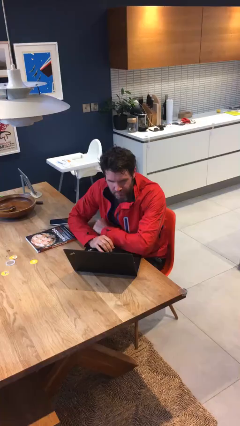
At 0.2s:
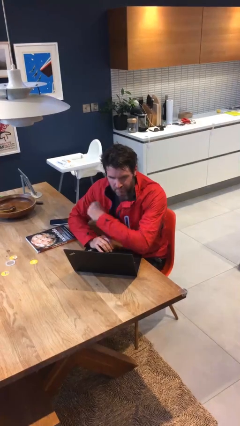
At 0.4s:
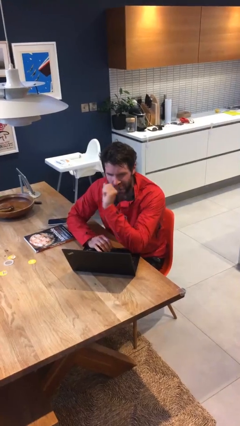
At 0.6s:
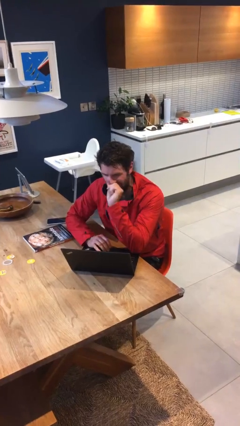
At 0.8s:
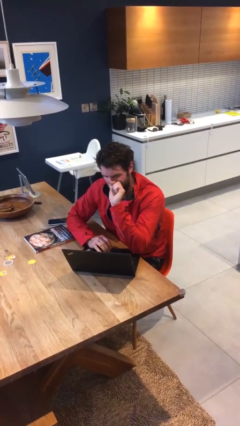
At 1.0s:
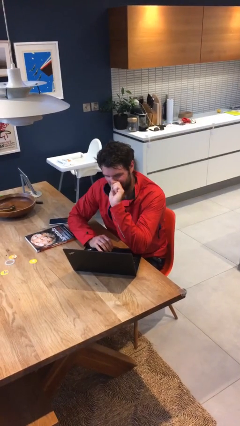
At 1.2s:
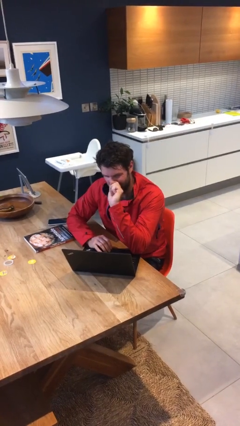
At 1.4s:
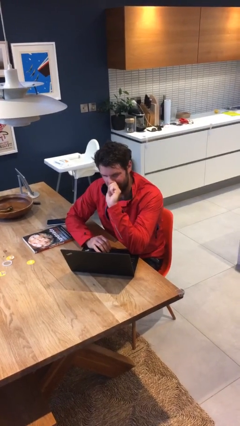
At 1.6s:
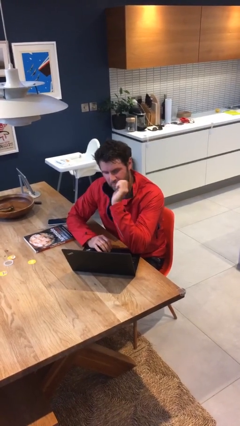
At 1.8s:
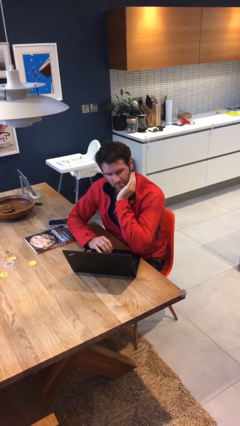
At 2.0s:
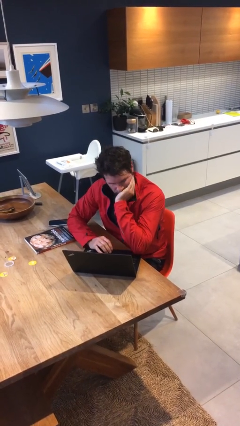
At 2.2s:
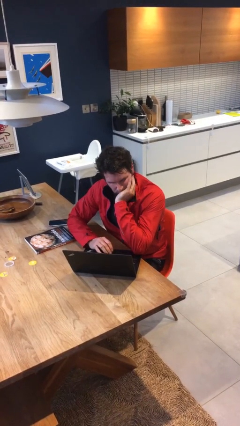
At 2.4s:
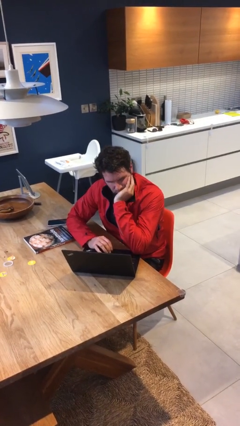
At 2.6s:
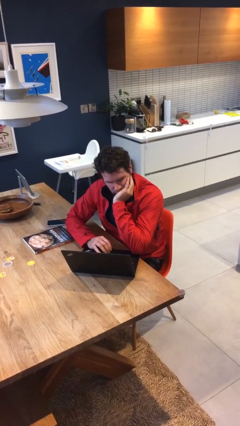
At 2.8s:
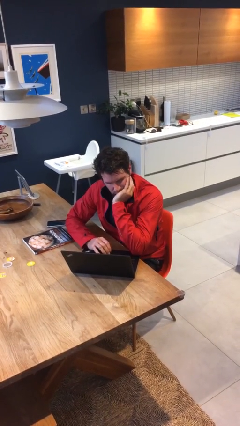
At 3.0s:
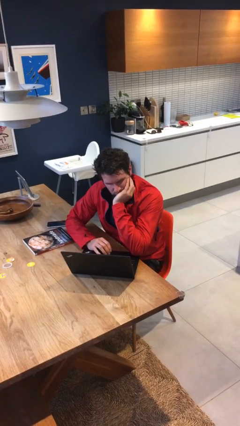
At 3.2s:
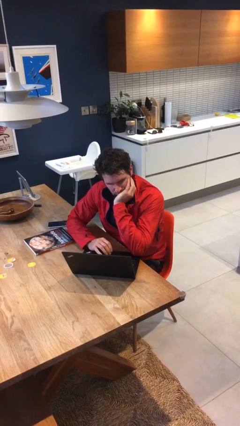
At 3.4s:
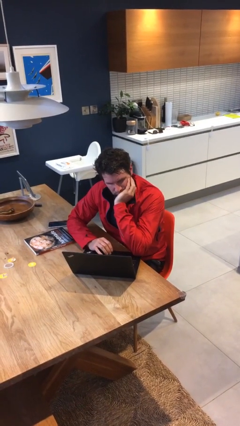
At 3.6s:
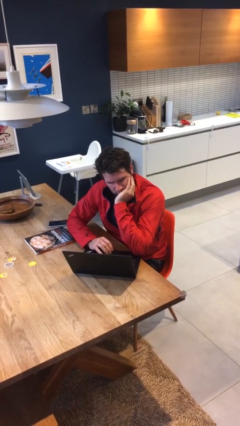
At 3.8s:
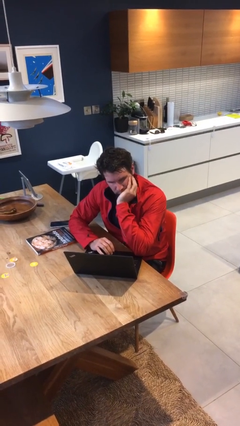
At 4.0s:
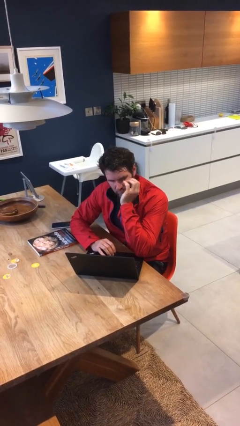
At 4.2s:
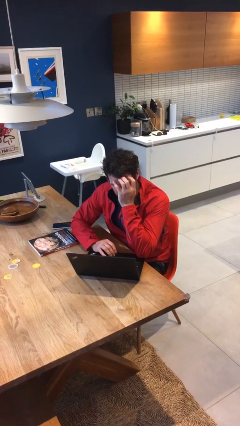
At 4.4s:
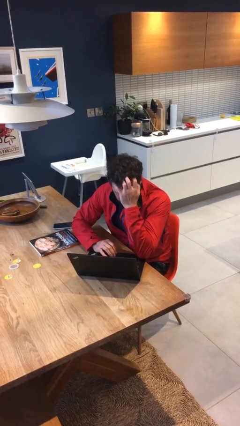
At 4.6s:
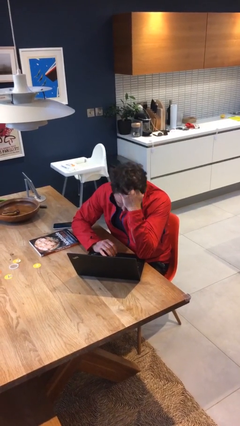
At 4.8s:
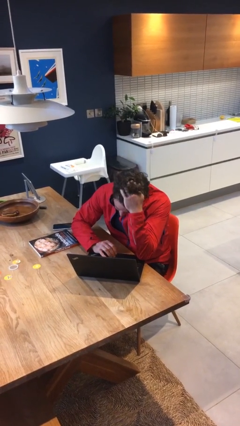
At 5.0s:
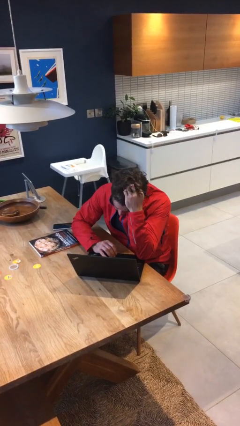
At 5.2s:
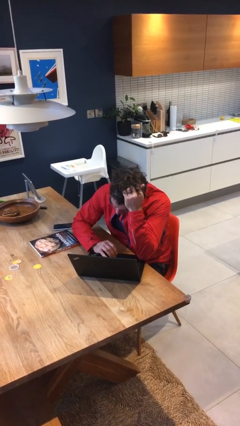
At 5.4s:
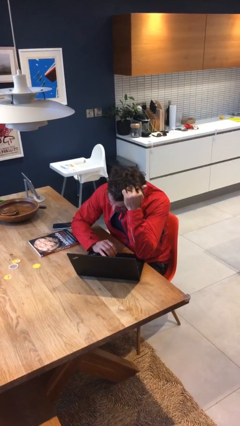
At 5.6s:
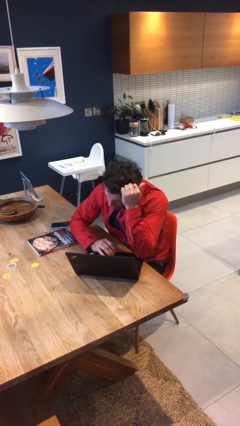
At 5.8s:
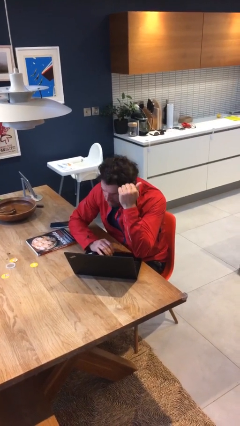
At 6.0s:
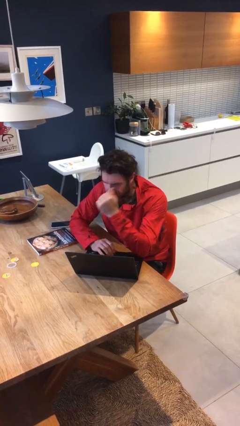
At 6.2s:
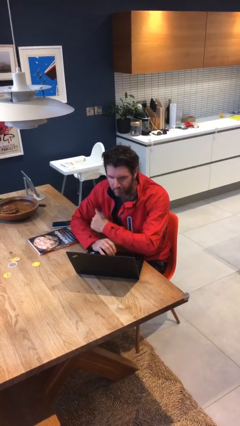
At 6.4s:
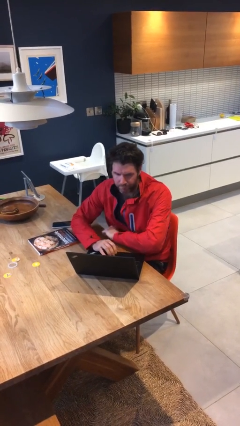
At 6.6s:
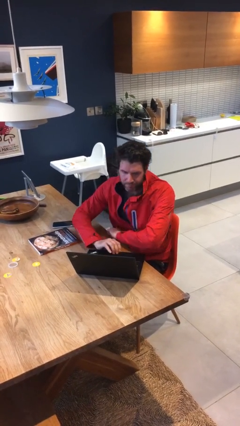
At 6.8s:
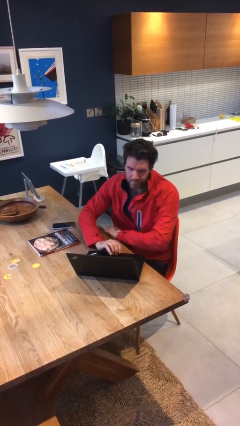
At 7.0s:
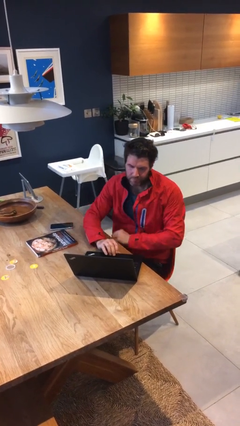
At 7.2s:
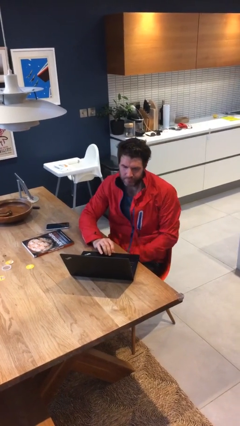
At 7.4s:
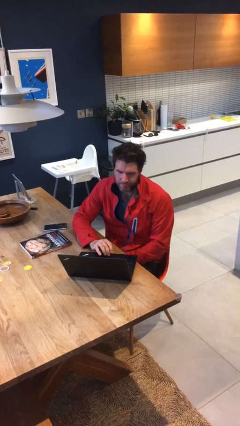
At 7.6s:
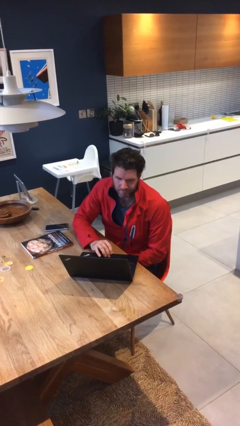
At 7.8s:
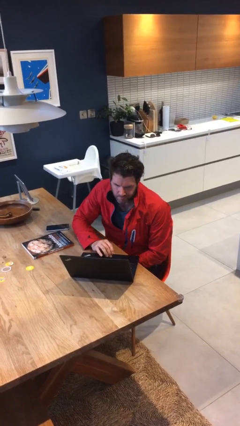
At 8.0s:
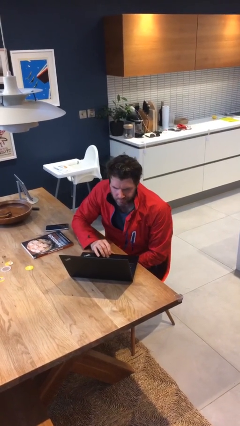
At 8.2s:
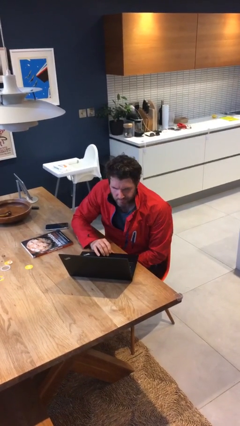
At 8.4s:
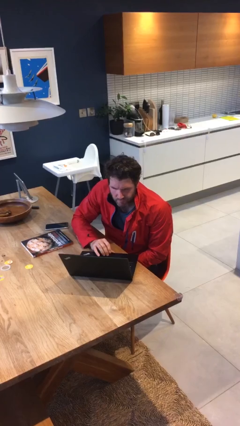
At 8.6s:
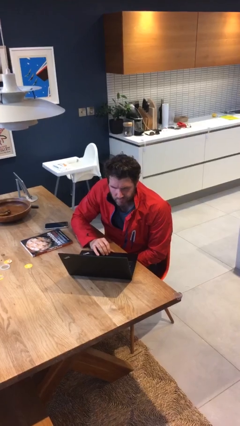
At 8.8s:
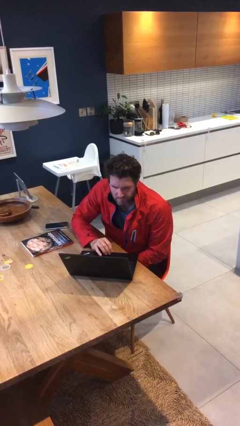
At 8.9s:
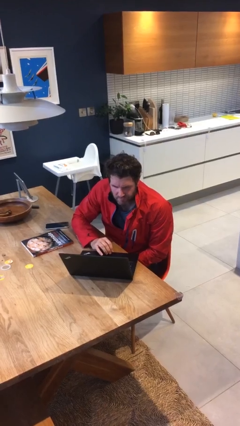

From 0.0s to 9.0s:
person interacts with laptop

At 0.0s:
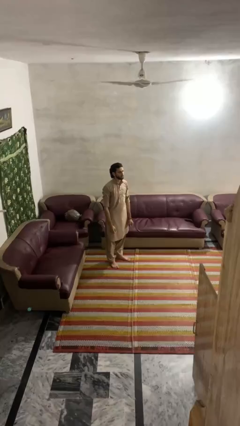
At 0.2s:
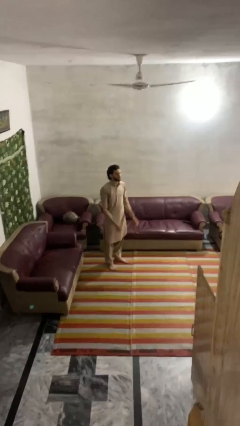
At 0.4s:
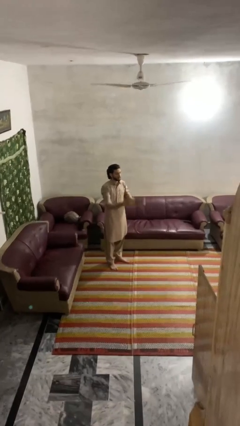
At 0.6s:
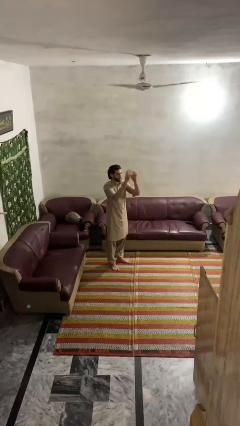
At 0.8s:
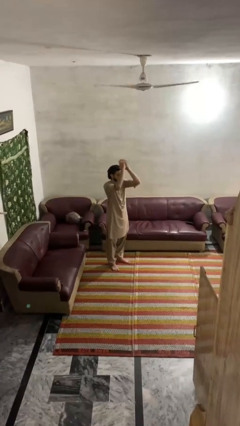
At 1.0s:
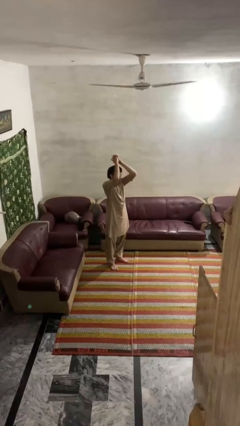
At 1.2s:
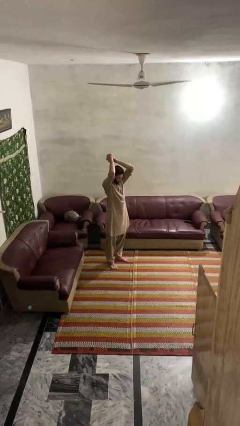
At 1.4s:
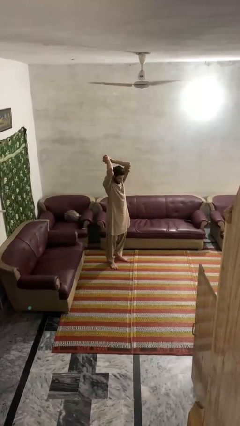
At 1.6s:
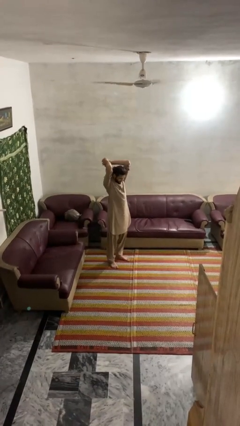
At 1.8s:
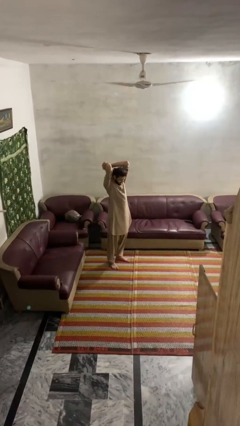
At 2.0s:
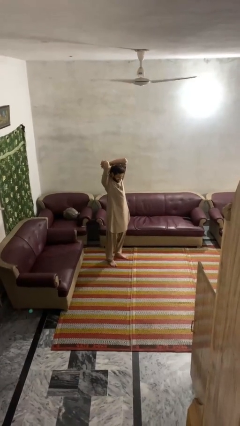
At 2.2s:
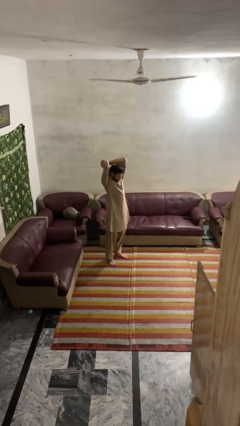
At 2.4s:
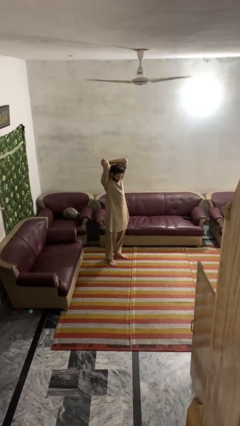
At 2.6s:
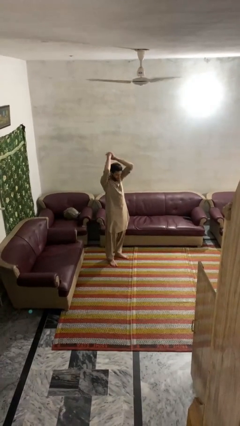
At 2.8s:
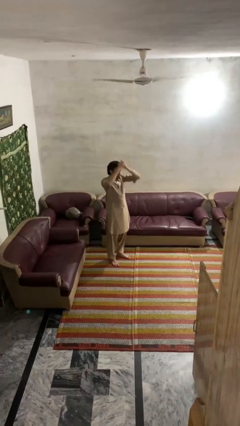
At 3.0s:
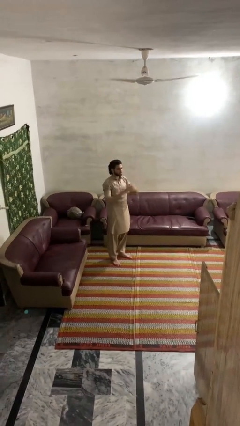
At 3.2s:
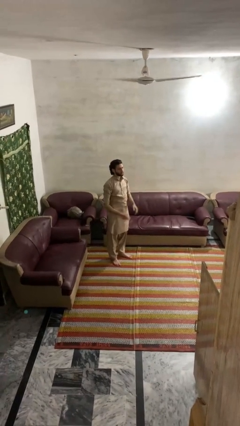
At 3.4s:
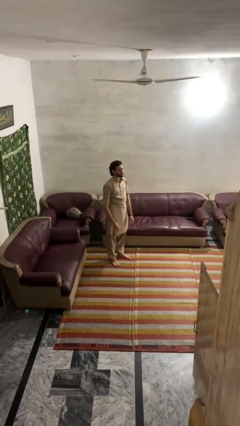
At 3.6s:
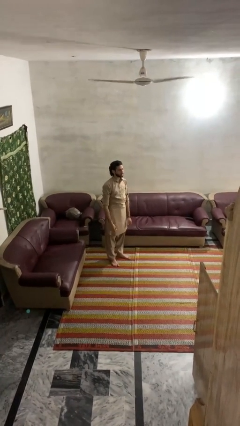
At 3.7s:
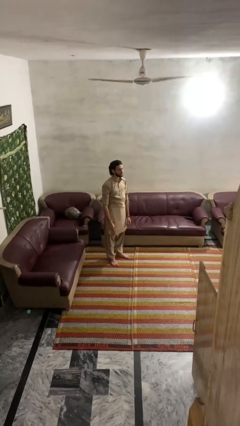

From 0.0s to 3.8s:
person stretches arms over head

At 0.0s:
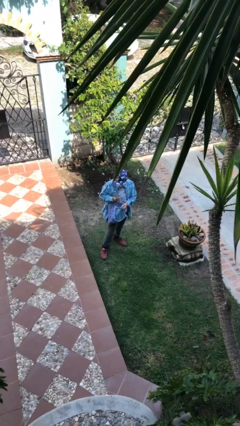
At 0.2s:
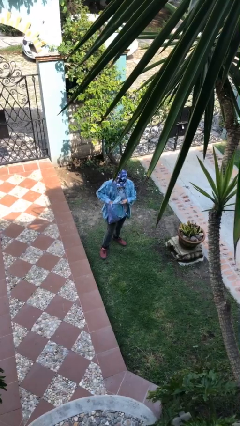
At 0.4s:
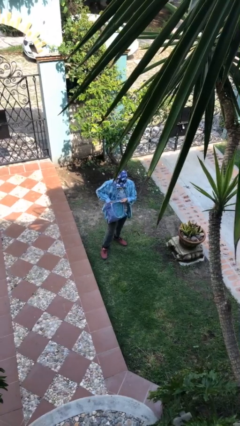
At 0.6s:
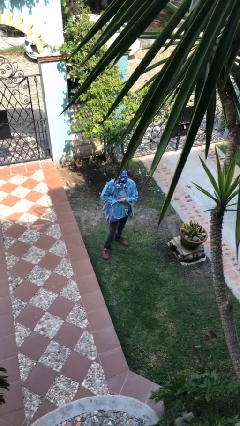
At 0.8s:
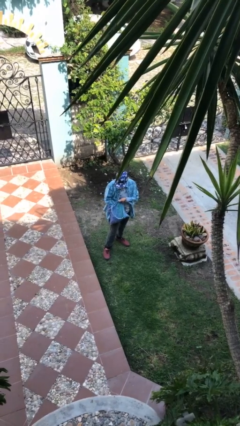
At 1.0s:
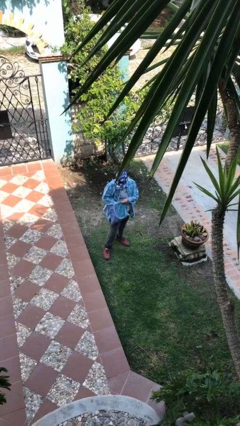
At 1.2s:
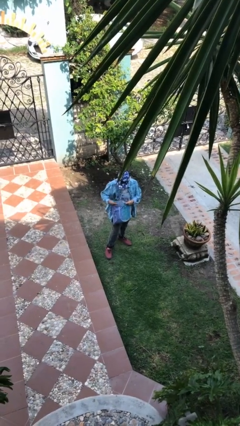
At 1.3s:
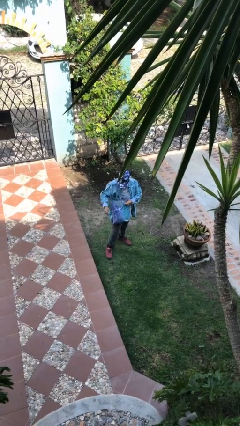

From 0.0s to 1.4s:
person puts object into purse

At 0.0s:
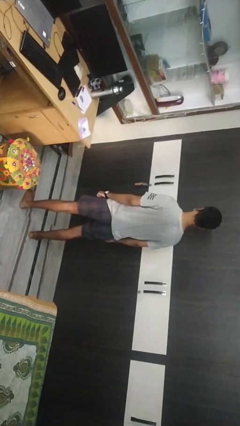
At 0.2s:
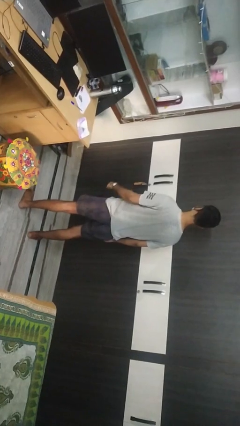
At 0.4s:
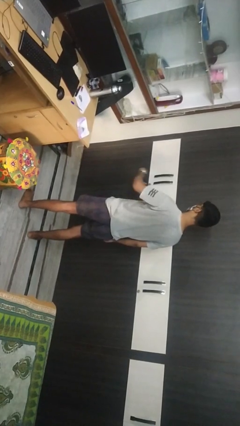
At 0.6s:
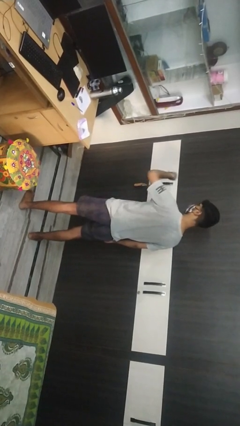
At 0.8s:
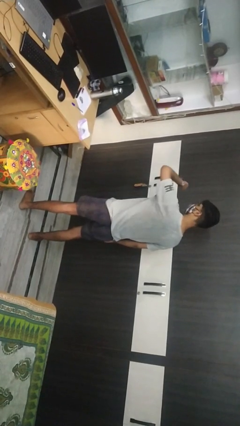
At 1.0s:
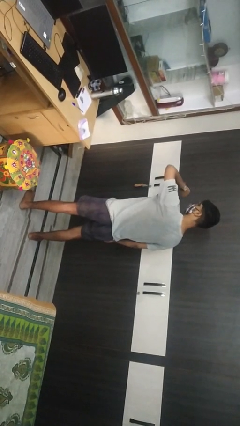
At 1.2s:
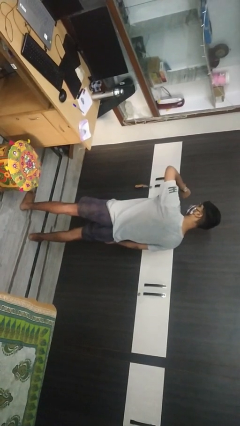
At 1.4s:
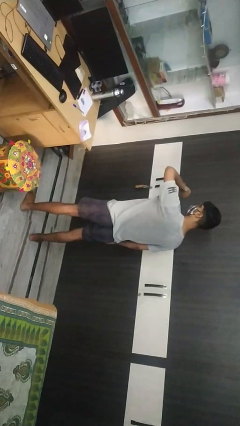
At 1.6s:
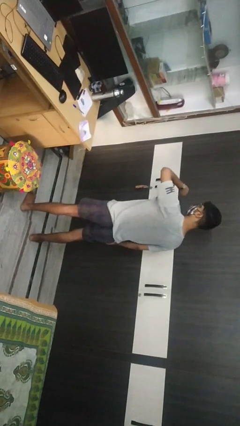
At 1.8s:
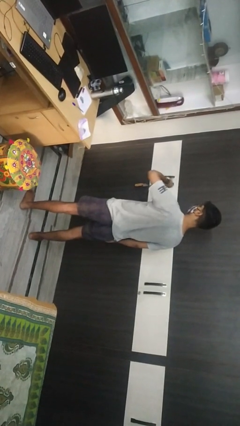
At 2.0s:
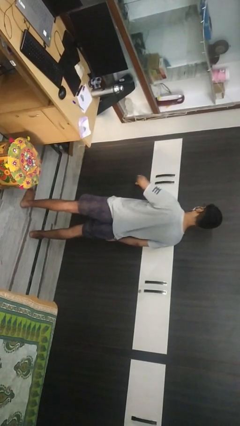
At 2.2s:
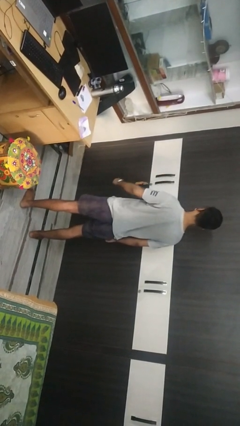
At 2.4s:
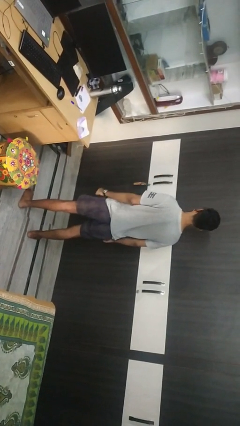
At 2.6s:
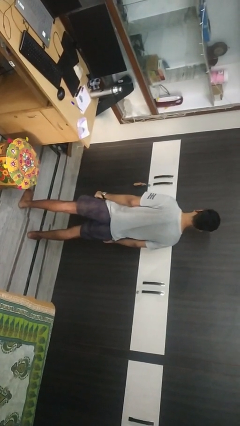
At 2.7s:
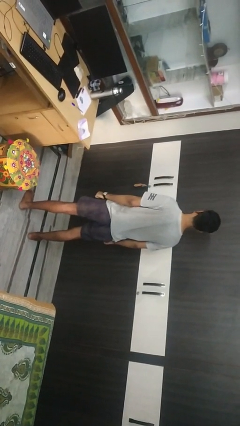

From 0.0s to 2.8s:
person looks at wristwatch

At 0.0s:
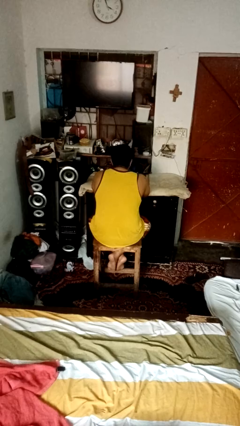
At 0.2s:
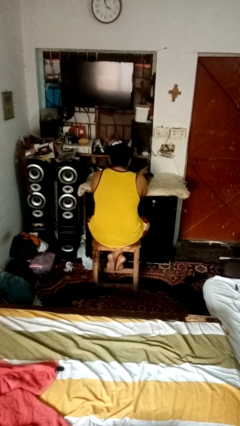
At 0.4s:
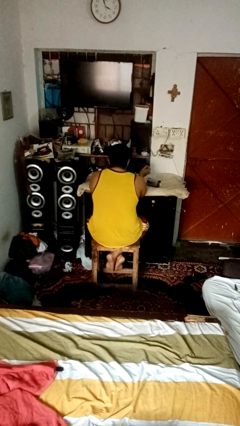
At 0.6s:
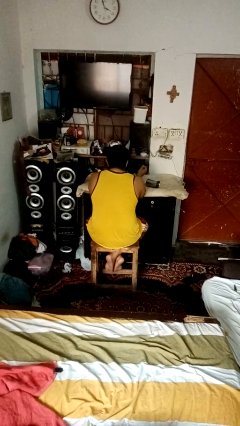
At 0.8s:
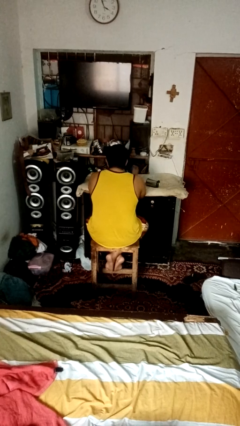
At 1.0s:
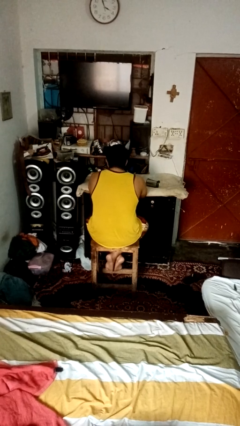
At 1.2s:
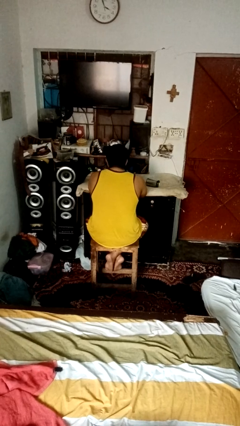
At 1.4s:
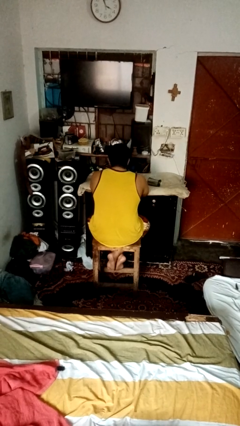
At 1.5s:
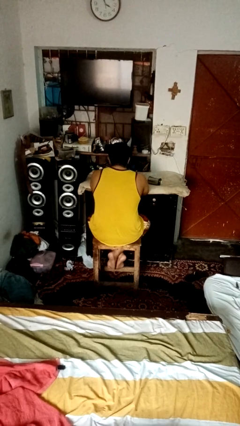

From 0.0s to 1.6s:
person knocks over glass
